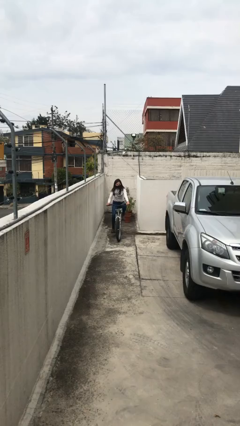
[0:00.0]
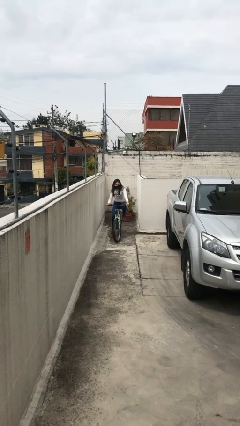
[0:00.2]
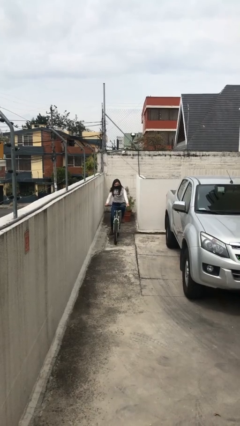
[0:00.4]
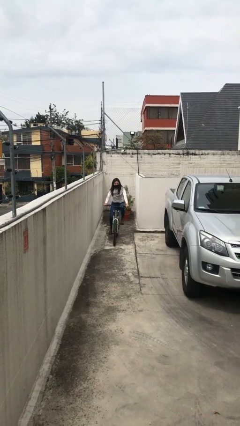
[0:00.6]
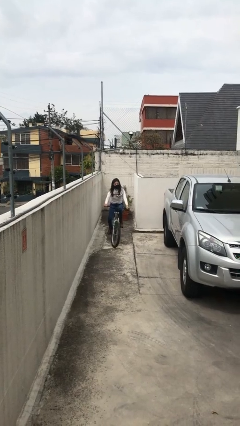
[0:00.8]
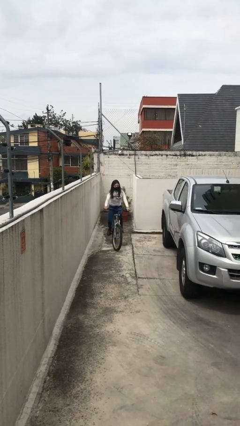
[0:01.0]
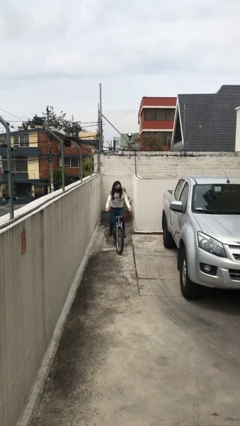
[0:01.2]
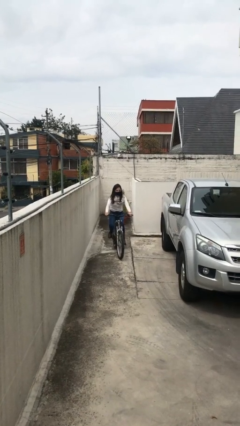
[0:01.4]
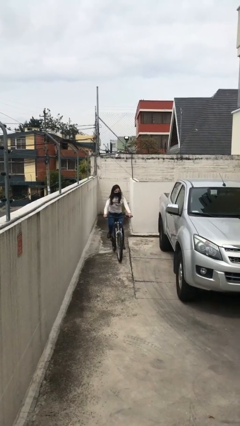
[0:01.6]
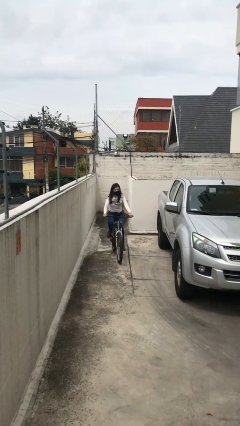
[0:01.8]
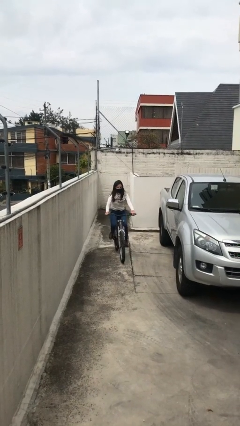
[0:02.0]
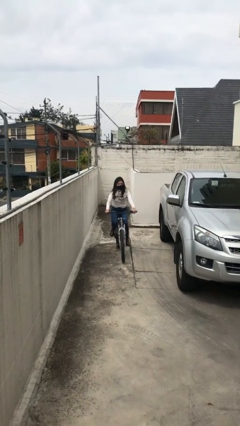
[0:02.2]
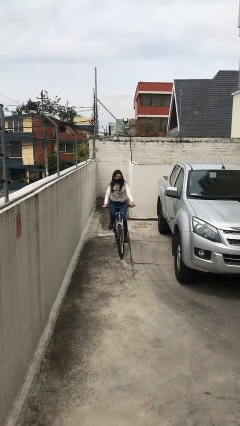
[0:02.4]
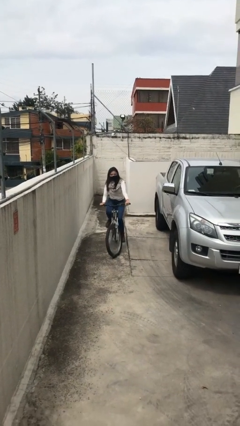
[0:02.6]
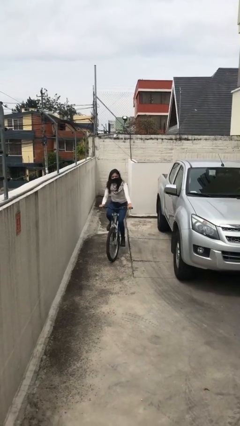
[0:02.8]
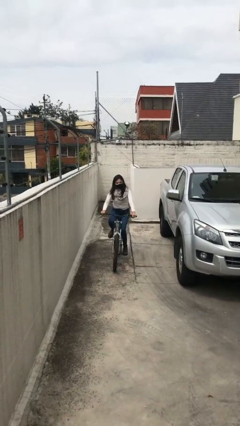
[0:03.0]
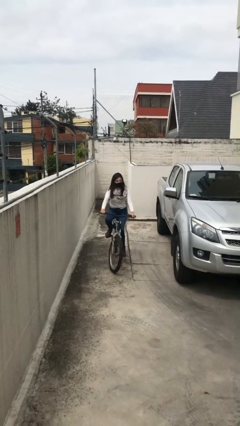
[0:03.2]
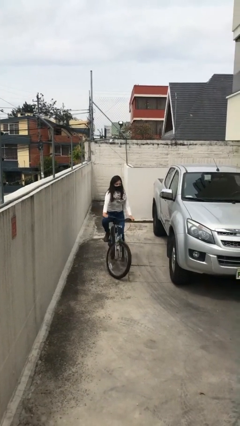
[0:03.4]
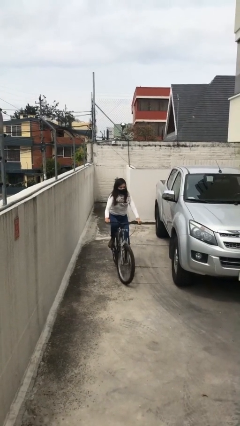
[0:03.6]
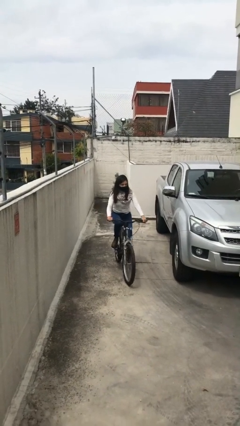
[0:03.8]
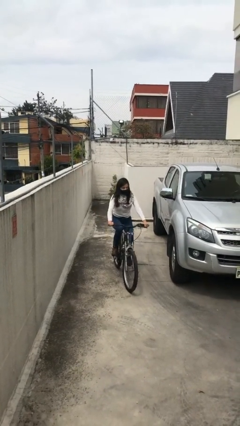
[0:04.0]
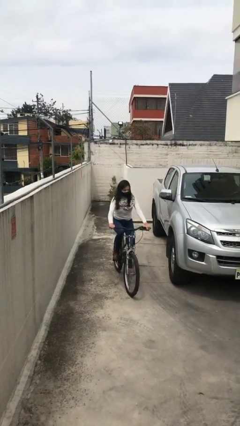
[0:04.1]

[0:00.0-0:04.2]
person rides bicycle

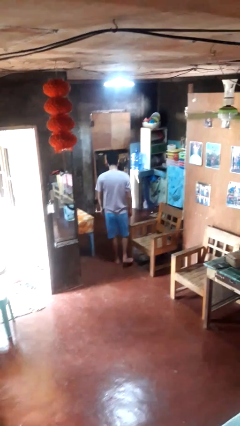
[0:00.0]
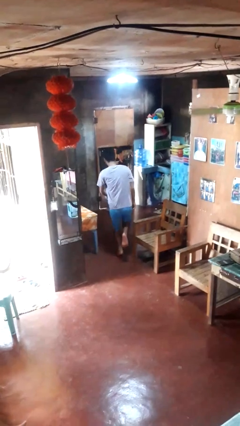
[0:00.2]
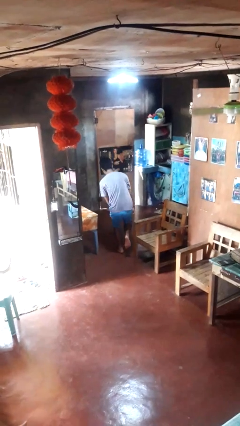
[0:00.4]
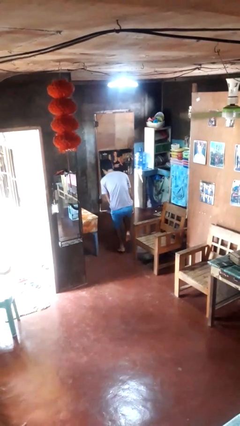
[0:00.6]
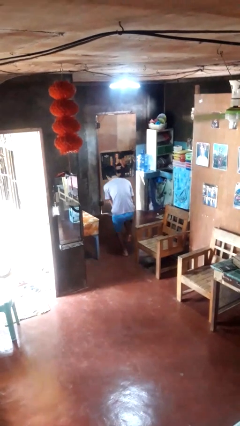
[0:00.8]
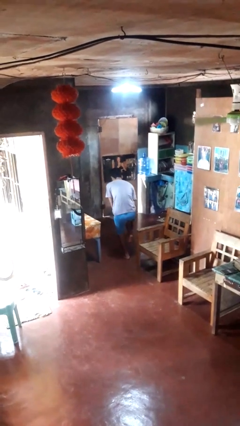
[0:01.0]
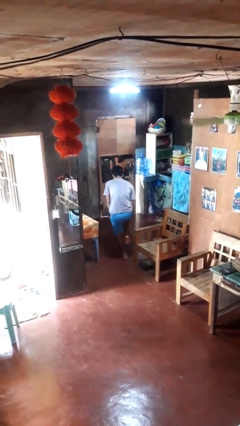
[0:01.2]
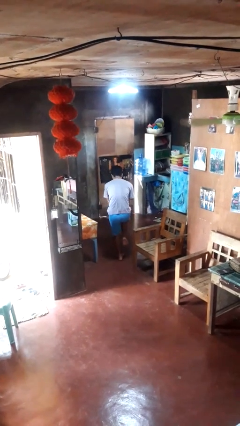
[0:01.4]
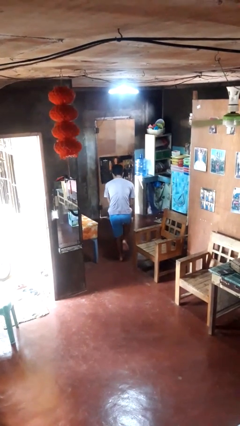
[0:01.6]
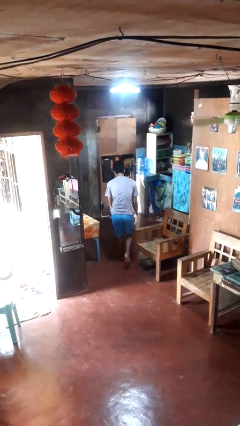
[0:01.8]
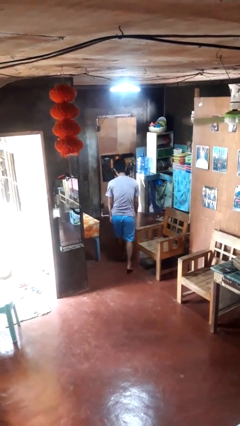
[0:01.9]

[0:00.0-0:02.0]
person stubs toe

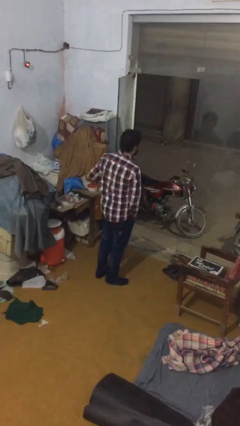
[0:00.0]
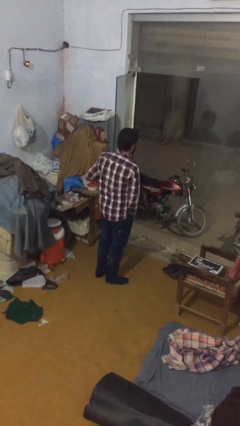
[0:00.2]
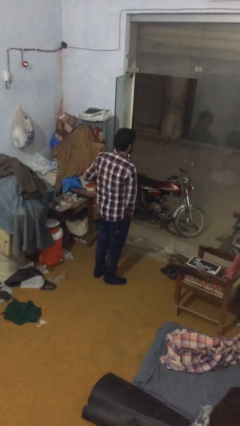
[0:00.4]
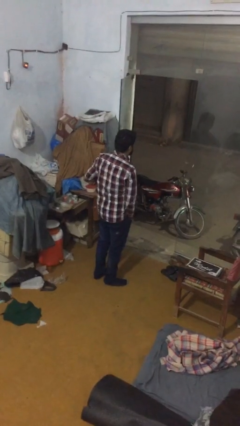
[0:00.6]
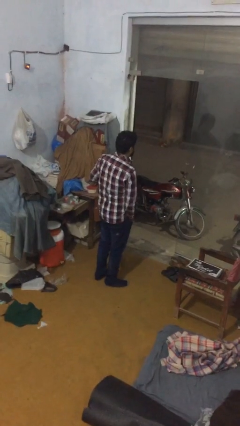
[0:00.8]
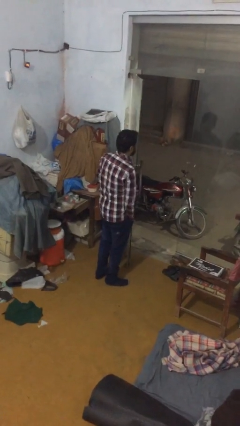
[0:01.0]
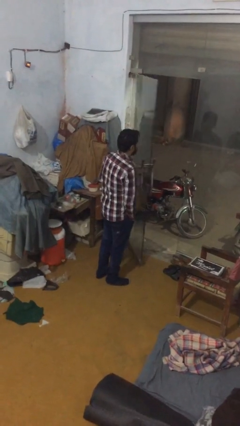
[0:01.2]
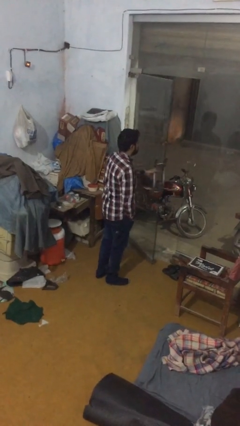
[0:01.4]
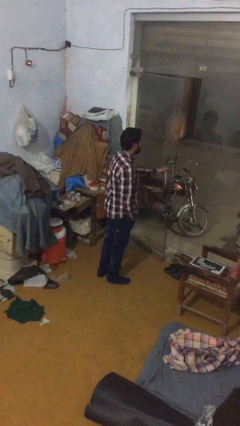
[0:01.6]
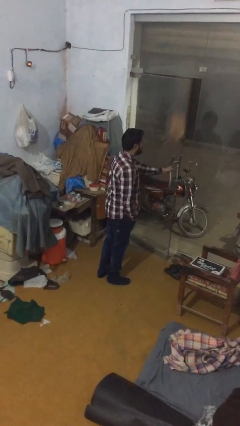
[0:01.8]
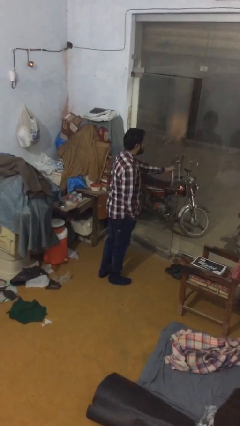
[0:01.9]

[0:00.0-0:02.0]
person closes facility door

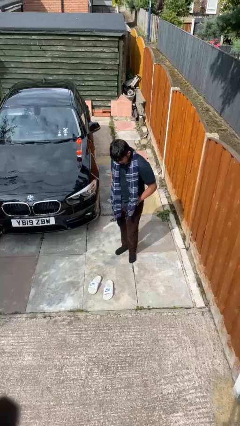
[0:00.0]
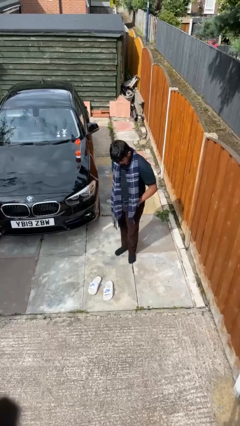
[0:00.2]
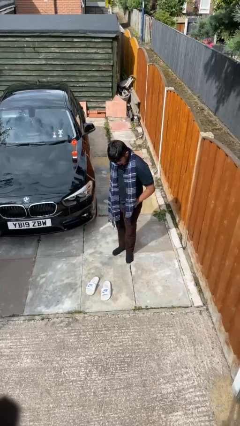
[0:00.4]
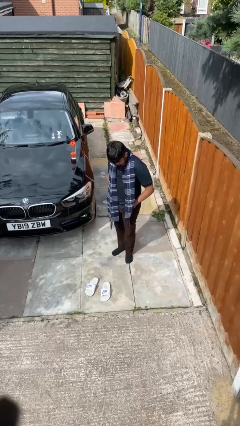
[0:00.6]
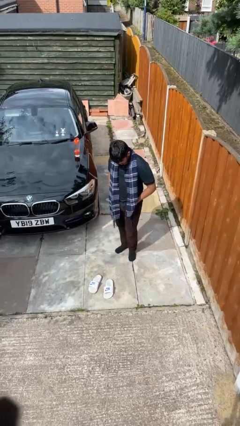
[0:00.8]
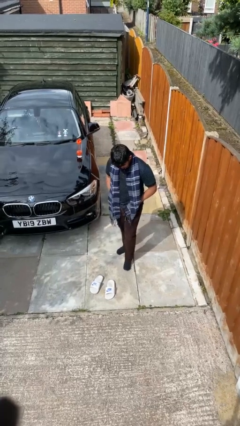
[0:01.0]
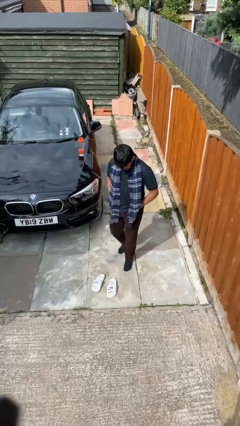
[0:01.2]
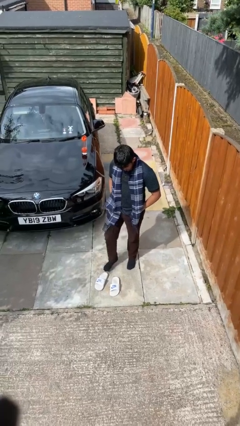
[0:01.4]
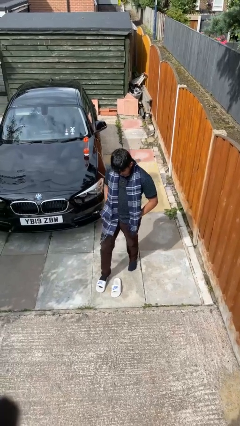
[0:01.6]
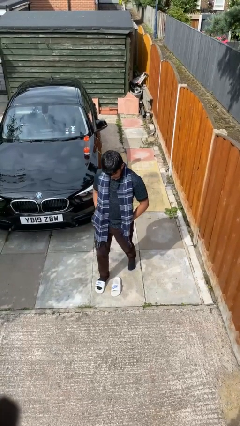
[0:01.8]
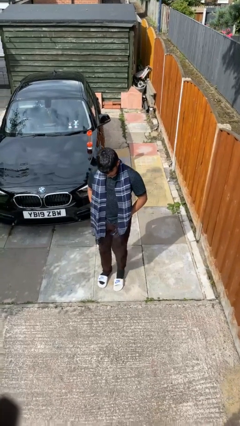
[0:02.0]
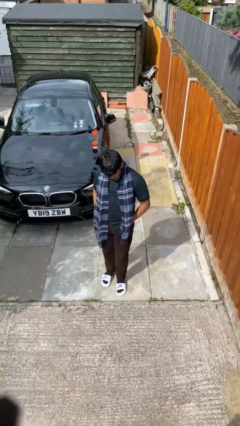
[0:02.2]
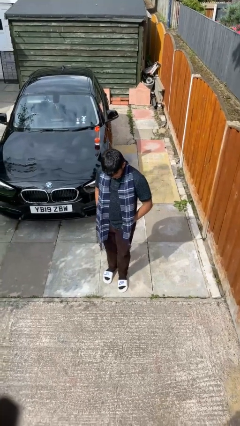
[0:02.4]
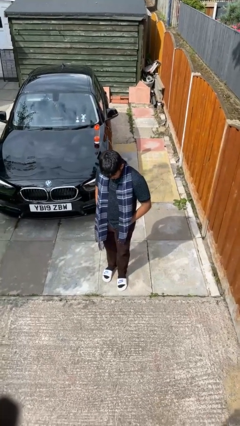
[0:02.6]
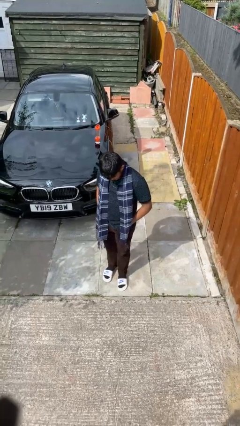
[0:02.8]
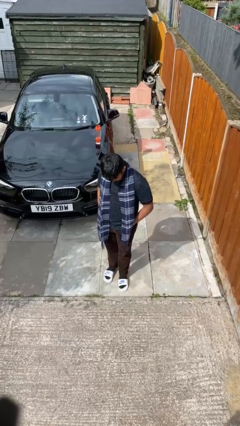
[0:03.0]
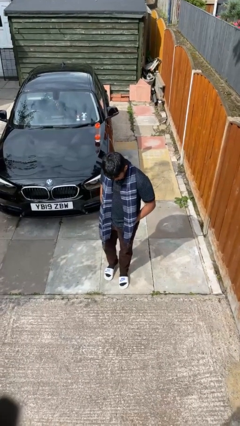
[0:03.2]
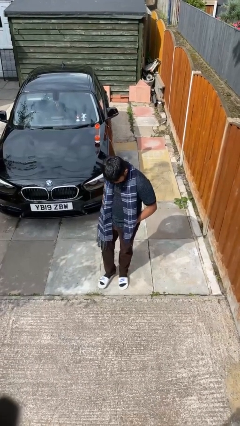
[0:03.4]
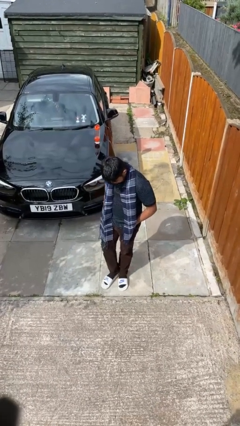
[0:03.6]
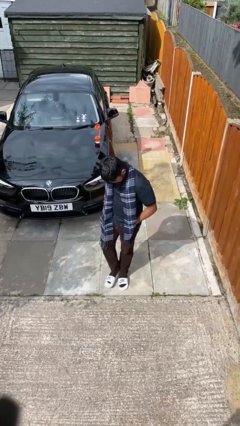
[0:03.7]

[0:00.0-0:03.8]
person puts on shoes

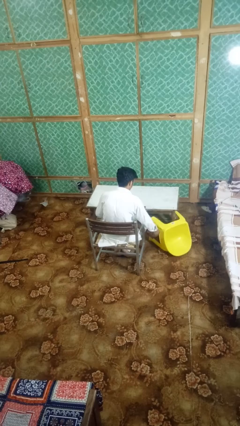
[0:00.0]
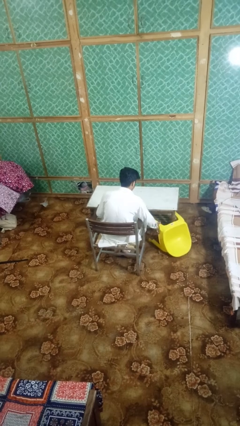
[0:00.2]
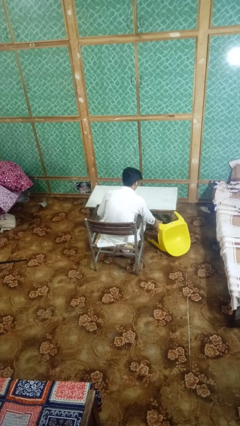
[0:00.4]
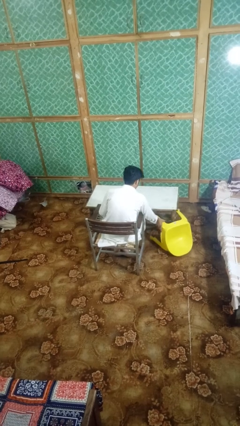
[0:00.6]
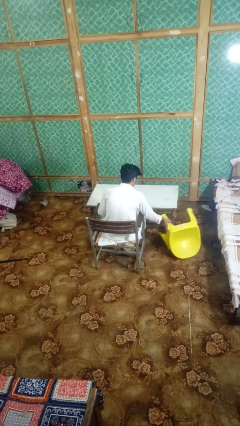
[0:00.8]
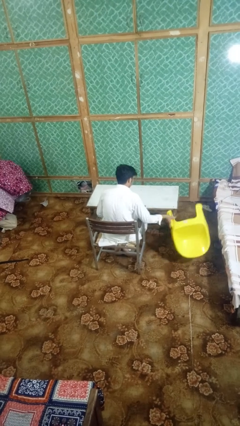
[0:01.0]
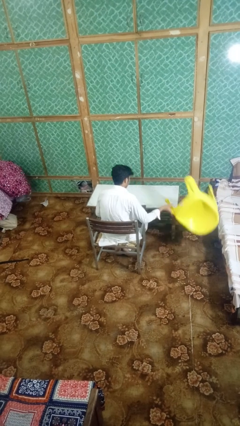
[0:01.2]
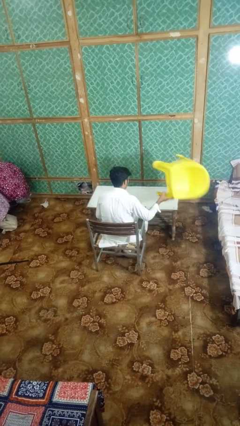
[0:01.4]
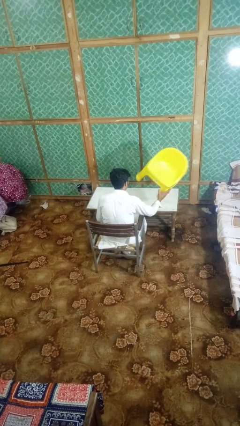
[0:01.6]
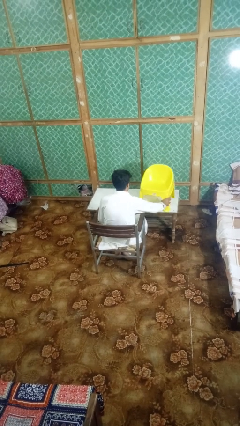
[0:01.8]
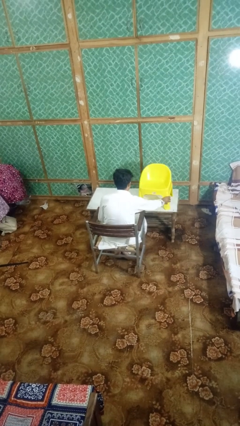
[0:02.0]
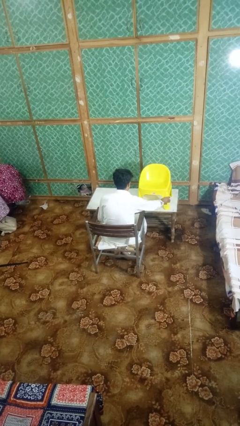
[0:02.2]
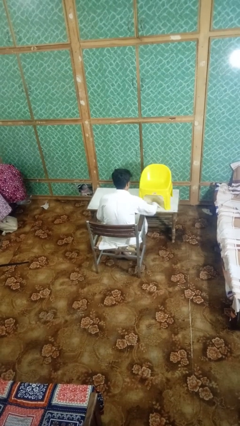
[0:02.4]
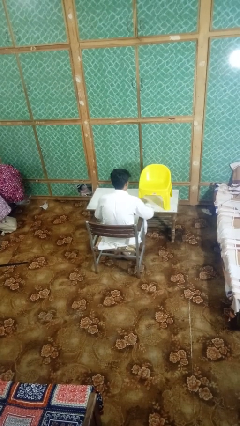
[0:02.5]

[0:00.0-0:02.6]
person sets upright furniture

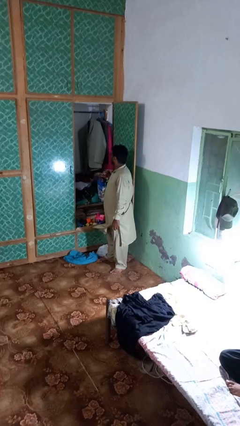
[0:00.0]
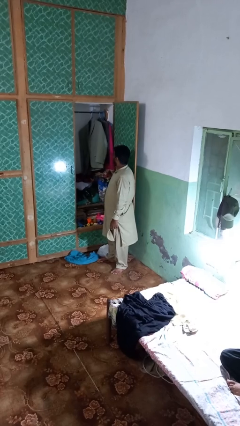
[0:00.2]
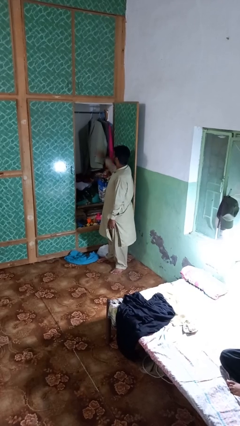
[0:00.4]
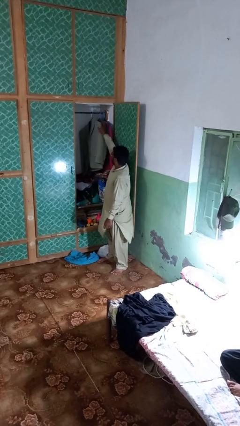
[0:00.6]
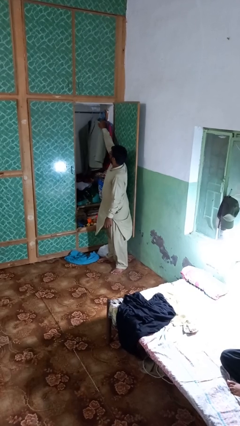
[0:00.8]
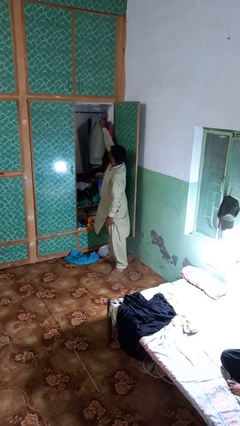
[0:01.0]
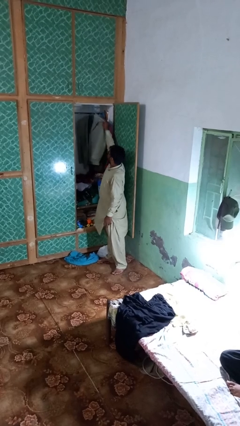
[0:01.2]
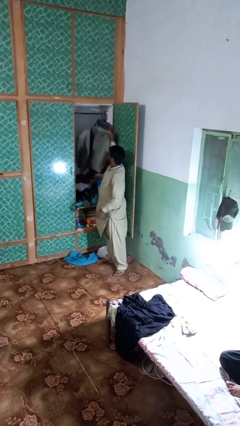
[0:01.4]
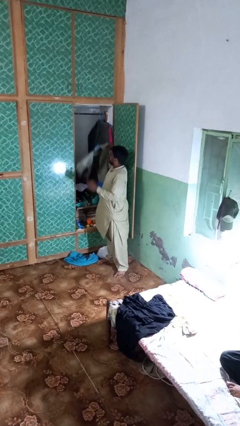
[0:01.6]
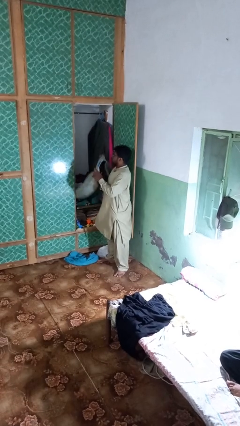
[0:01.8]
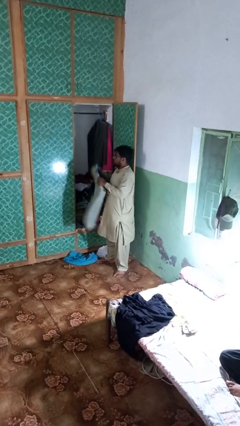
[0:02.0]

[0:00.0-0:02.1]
person takes clothes from closet

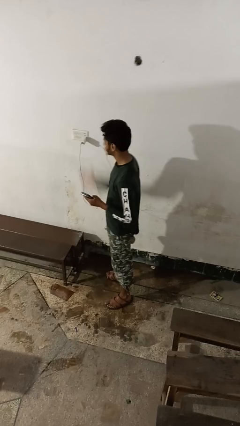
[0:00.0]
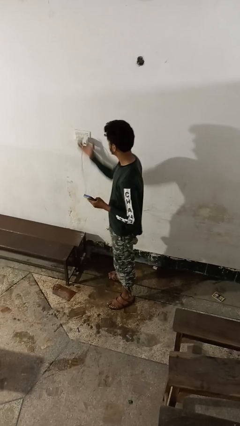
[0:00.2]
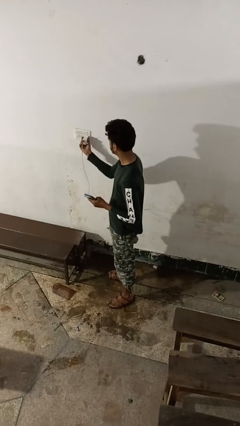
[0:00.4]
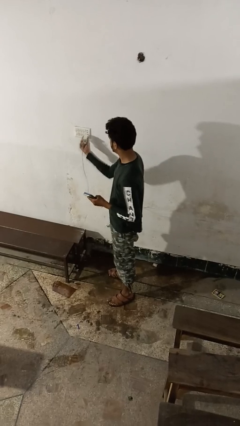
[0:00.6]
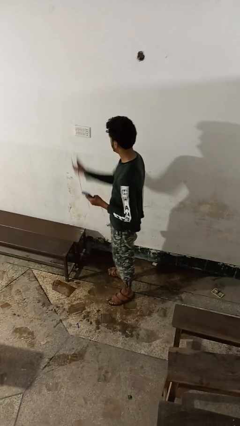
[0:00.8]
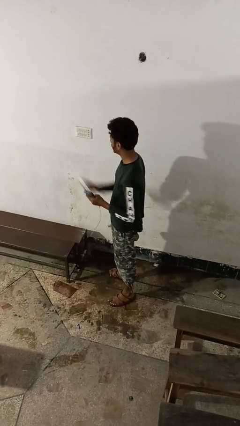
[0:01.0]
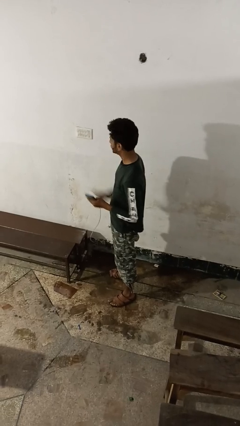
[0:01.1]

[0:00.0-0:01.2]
person unplugs from electrical socket
